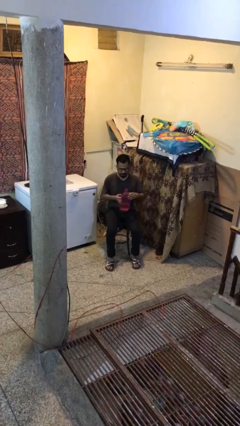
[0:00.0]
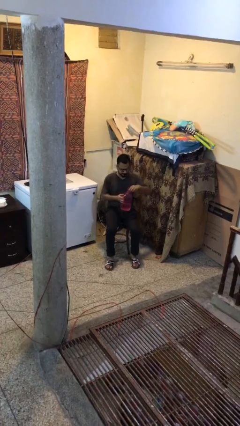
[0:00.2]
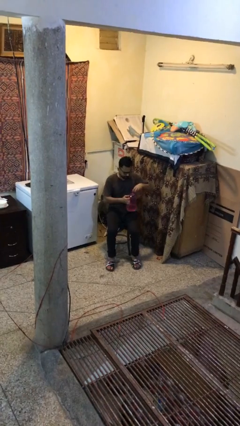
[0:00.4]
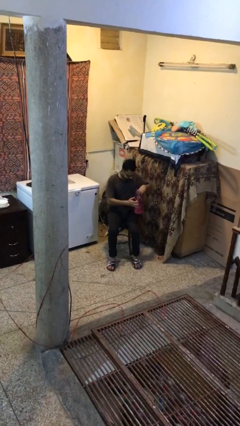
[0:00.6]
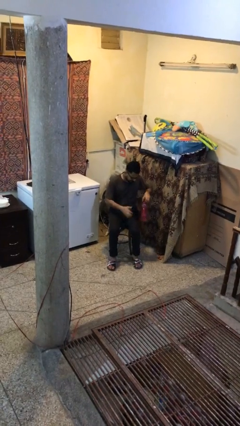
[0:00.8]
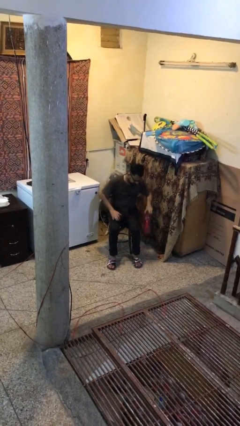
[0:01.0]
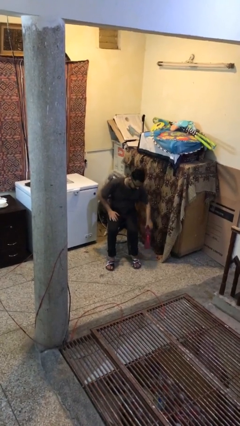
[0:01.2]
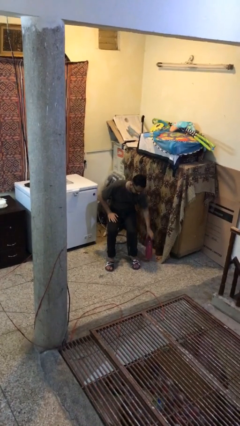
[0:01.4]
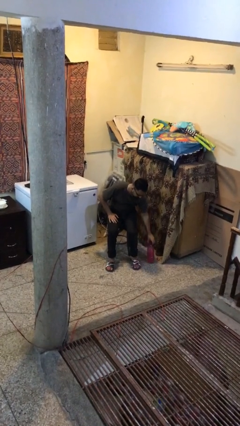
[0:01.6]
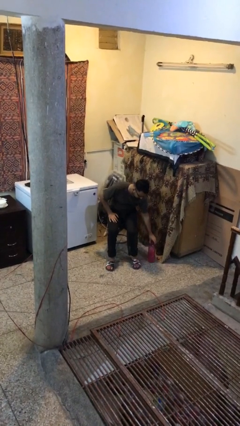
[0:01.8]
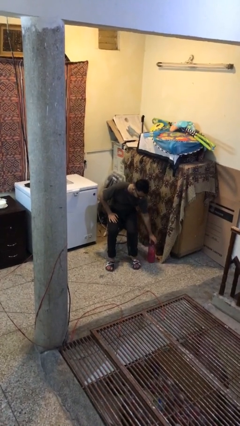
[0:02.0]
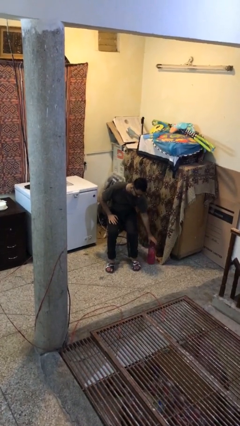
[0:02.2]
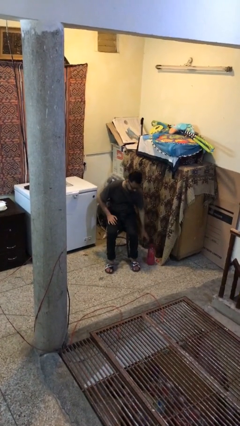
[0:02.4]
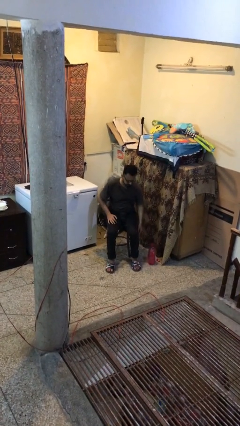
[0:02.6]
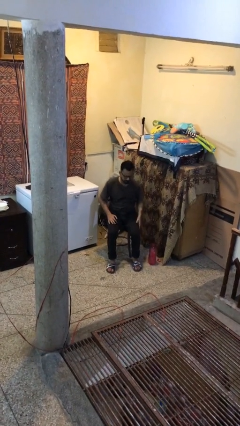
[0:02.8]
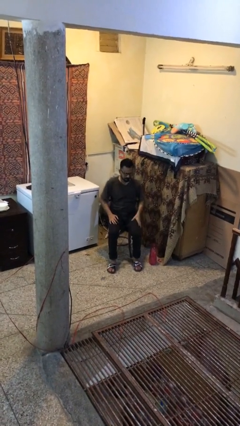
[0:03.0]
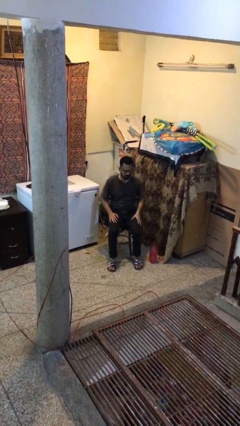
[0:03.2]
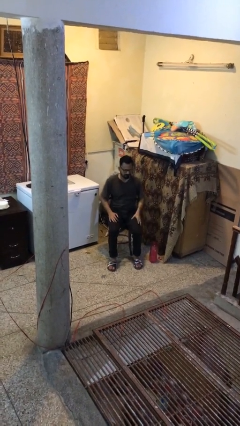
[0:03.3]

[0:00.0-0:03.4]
person puts down object on floor

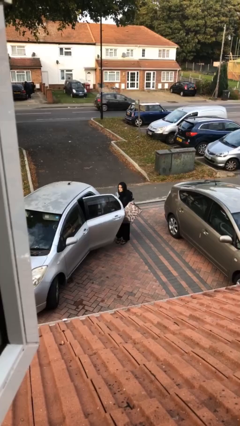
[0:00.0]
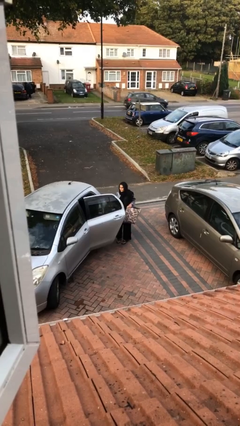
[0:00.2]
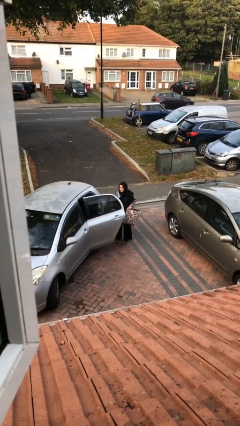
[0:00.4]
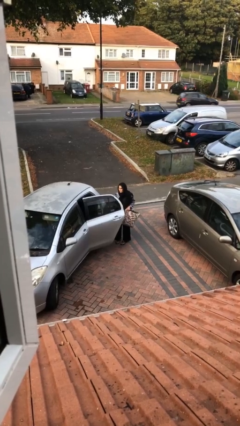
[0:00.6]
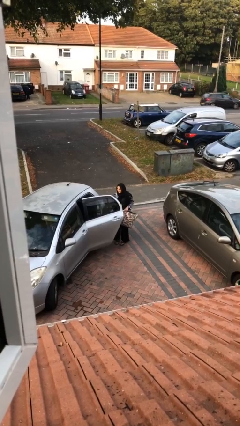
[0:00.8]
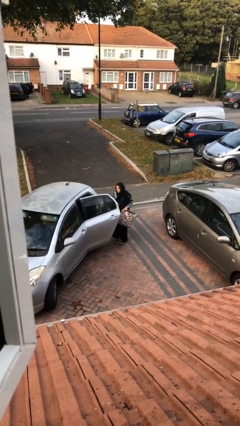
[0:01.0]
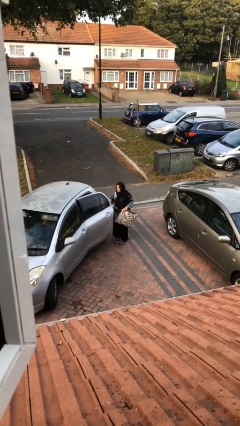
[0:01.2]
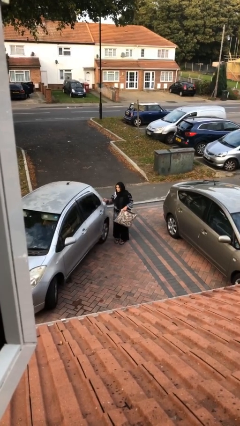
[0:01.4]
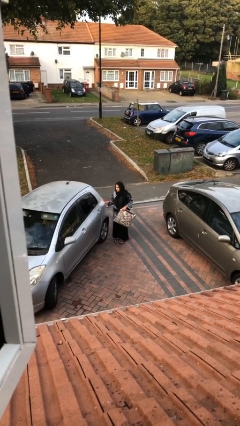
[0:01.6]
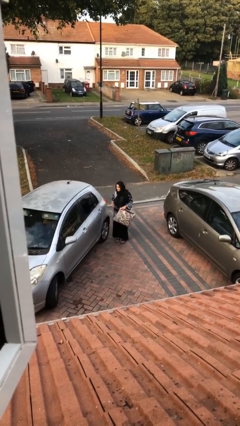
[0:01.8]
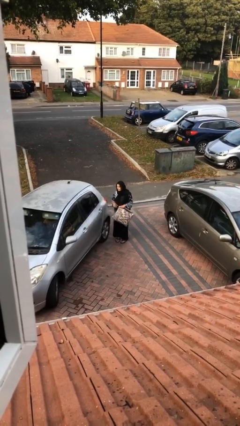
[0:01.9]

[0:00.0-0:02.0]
person closes car door

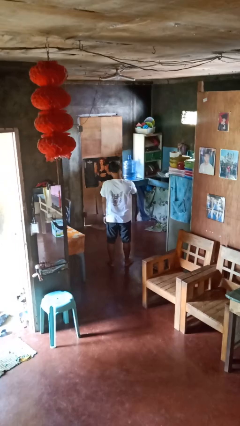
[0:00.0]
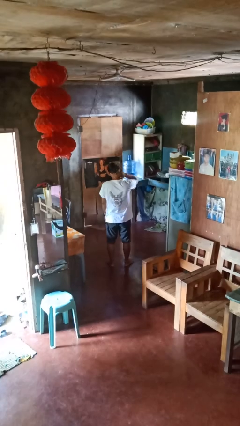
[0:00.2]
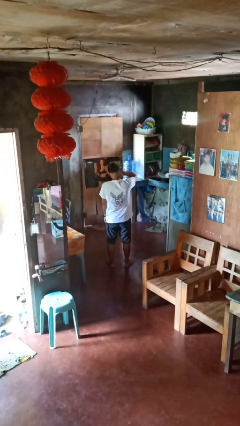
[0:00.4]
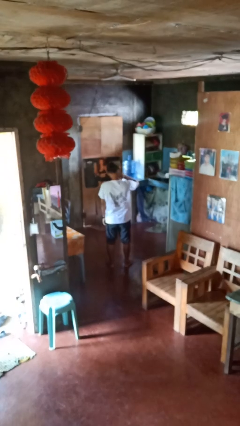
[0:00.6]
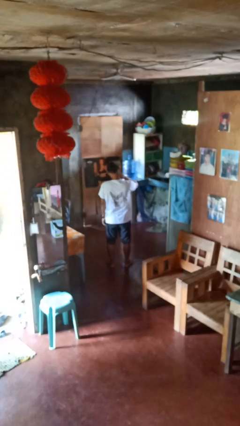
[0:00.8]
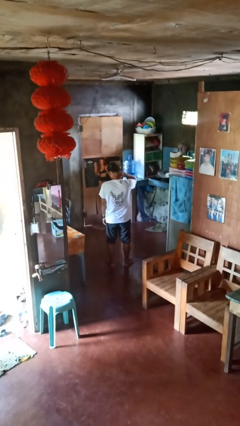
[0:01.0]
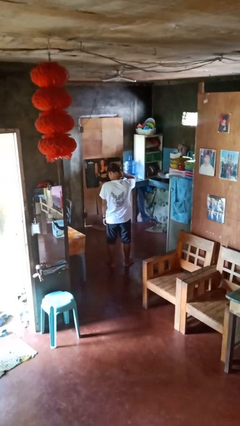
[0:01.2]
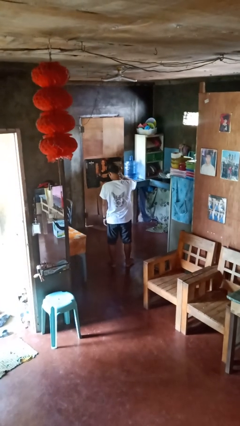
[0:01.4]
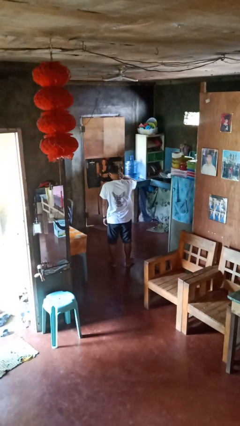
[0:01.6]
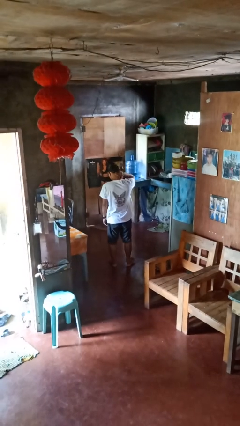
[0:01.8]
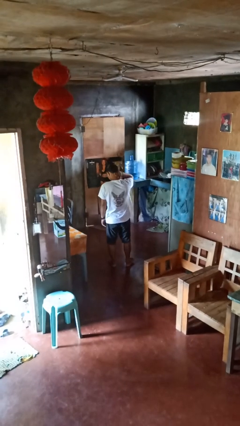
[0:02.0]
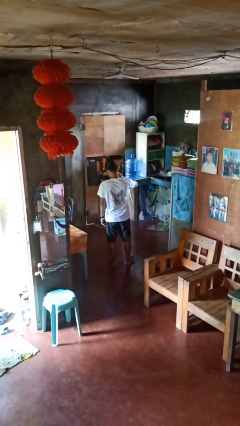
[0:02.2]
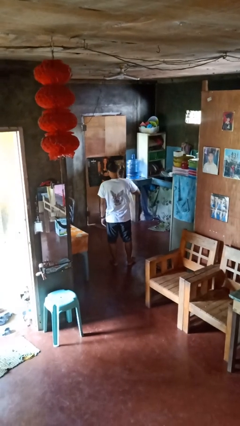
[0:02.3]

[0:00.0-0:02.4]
person rubs neck

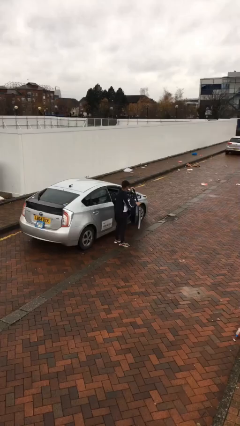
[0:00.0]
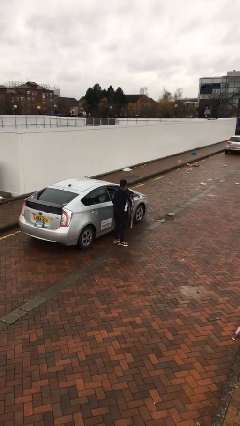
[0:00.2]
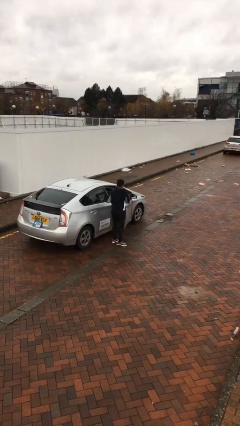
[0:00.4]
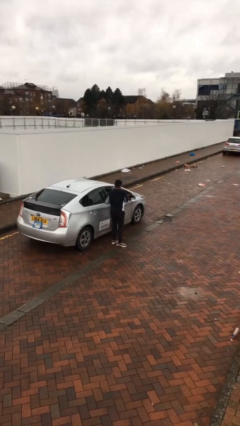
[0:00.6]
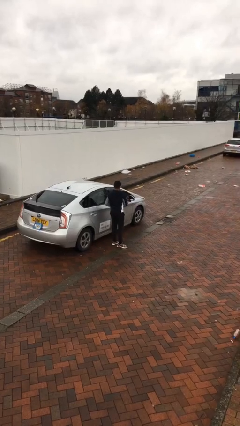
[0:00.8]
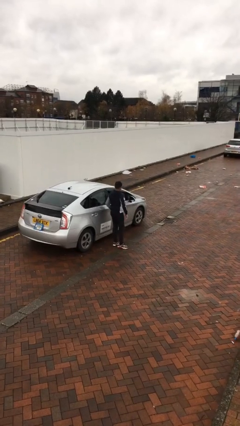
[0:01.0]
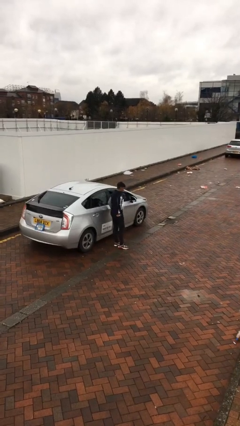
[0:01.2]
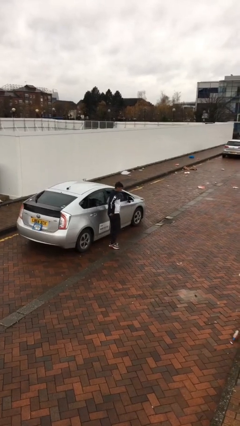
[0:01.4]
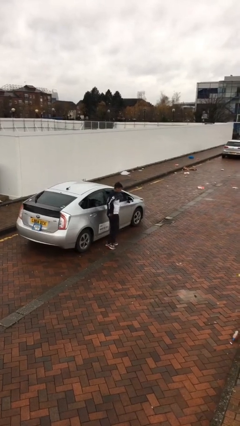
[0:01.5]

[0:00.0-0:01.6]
person exits car

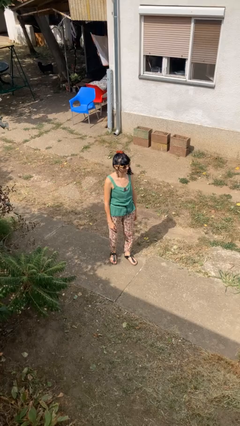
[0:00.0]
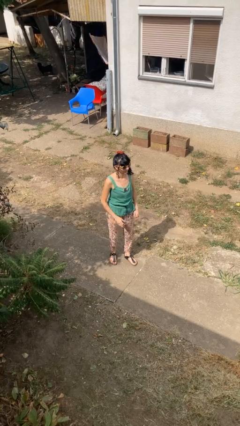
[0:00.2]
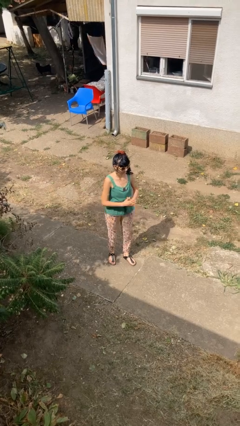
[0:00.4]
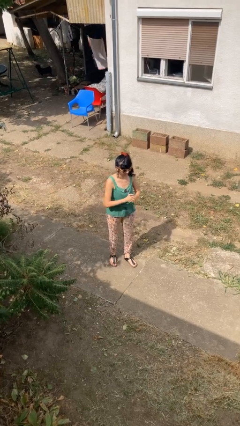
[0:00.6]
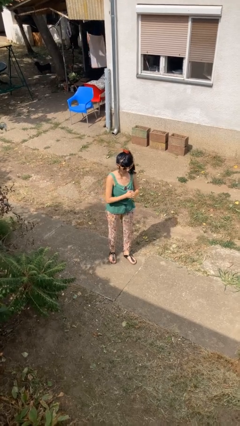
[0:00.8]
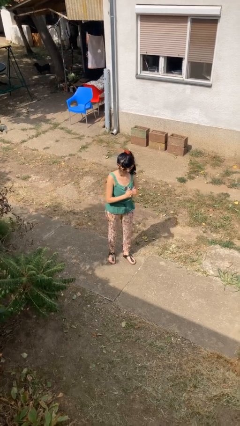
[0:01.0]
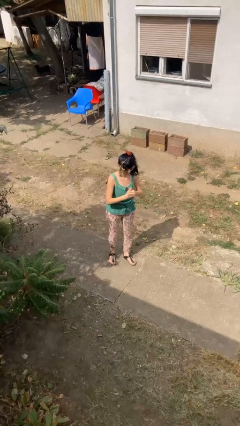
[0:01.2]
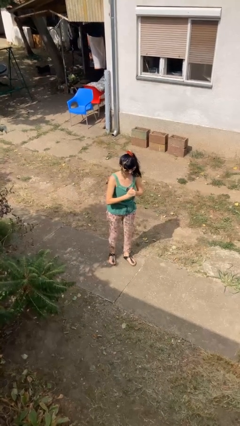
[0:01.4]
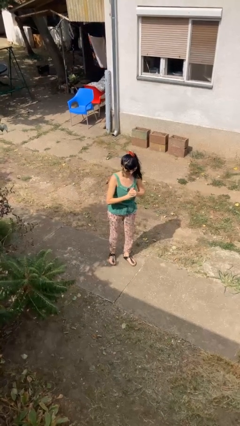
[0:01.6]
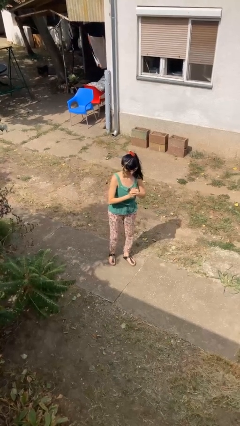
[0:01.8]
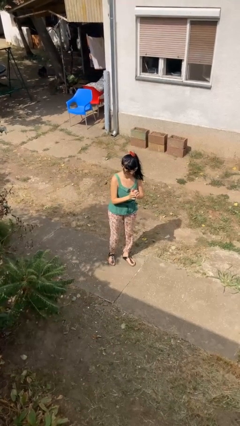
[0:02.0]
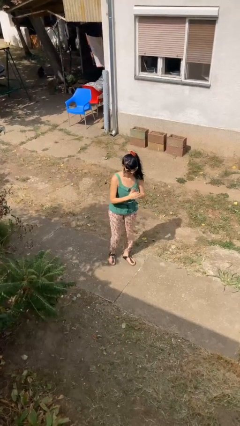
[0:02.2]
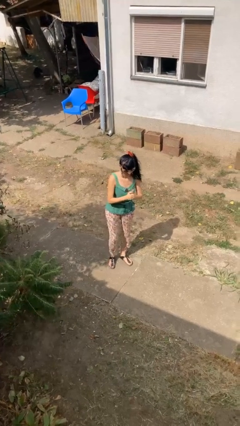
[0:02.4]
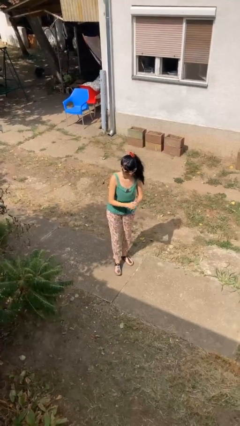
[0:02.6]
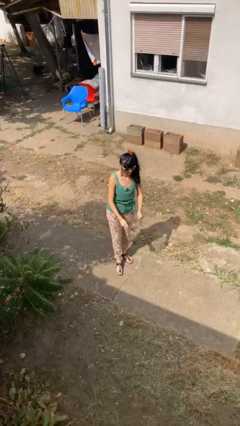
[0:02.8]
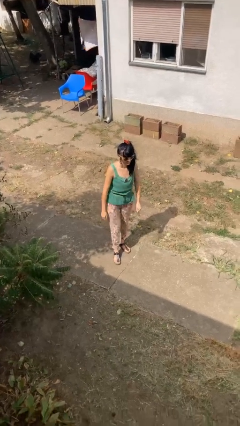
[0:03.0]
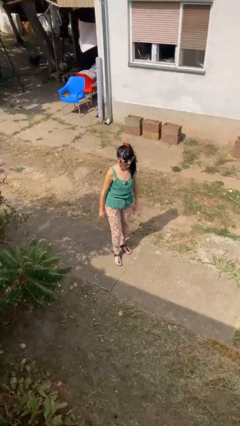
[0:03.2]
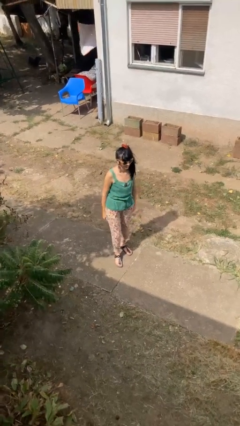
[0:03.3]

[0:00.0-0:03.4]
person cracks knuckles

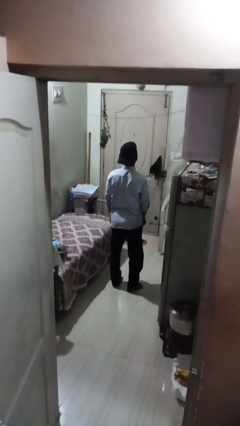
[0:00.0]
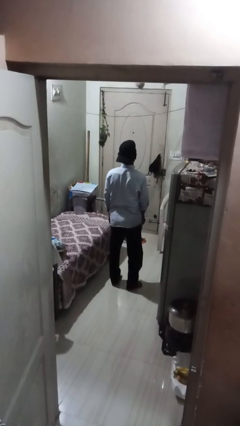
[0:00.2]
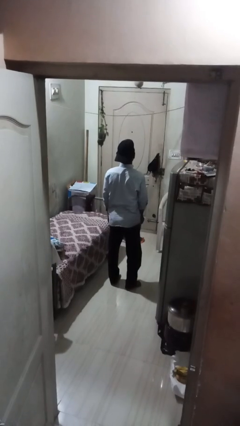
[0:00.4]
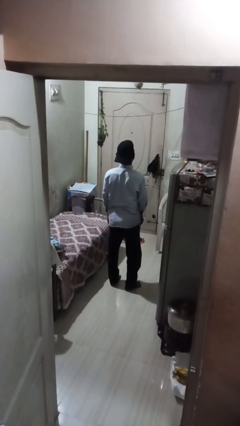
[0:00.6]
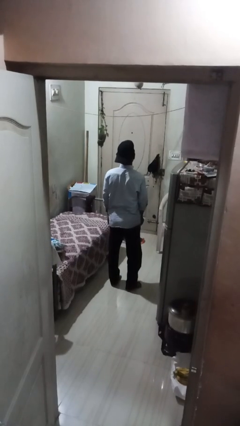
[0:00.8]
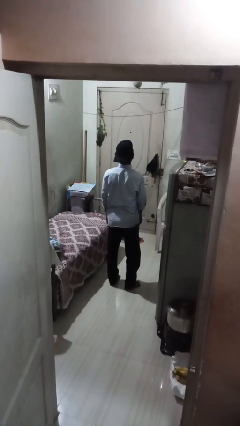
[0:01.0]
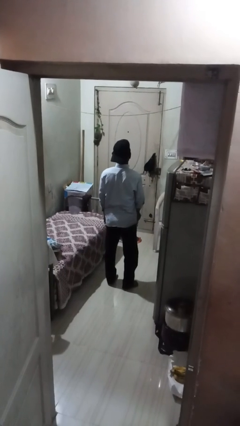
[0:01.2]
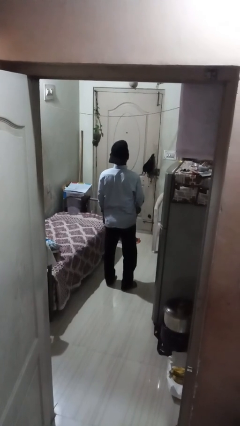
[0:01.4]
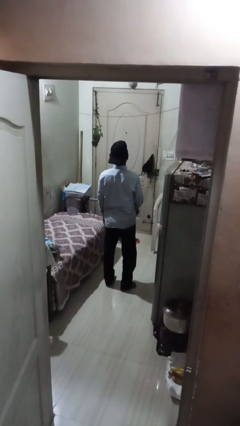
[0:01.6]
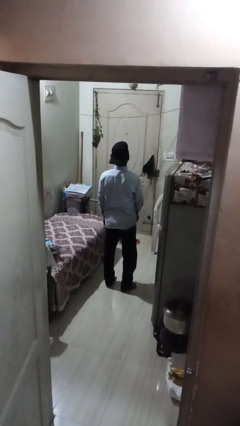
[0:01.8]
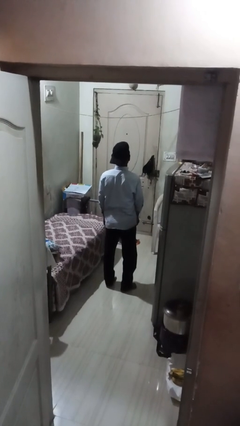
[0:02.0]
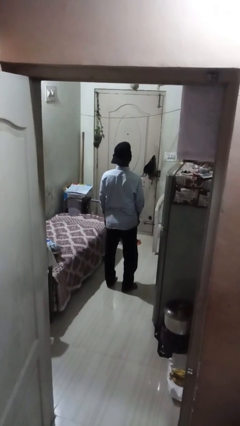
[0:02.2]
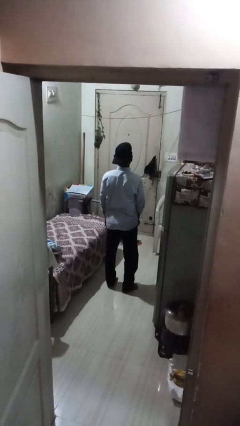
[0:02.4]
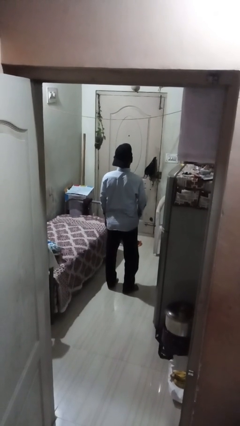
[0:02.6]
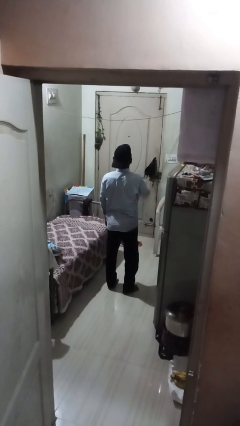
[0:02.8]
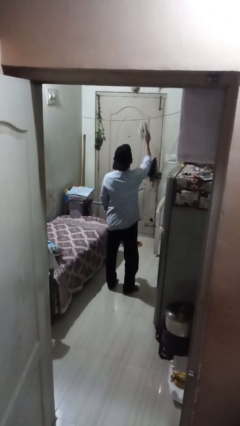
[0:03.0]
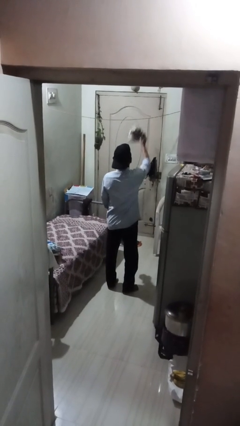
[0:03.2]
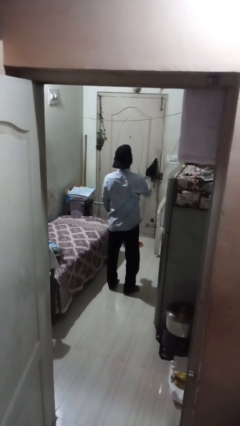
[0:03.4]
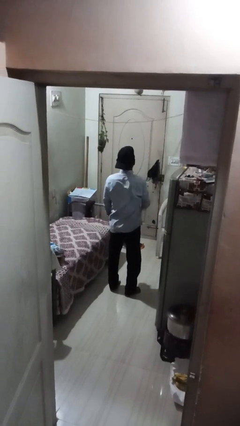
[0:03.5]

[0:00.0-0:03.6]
person drops object

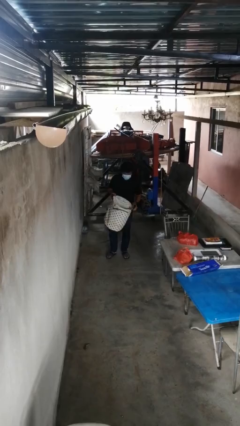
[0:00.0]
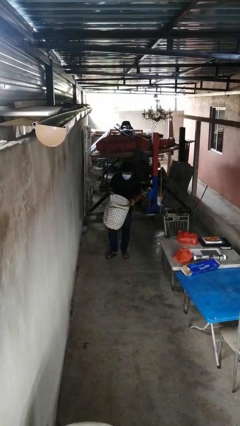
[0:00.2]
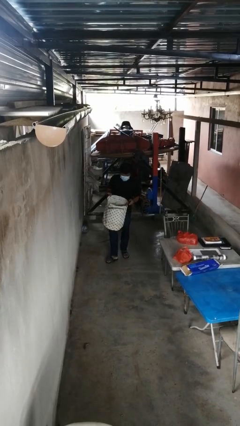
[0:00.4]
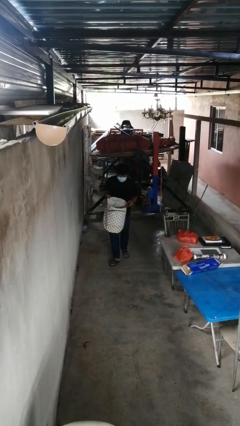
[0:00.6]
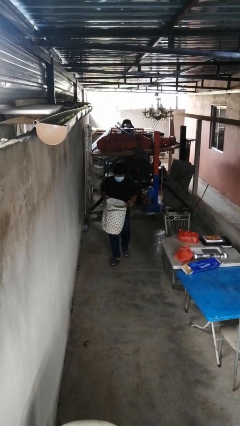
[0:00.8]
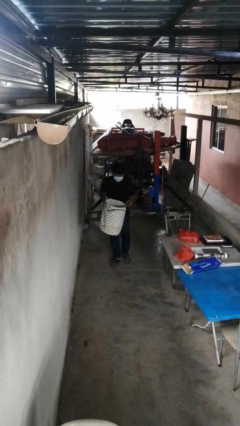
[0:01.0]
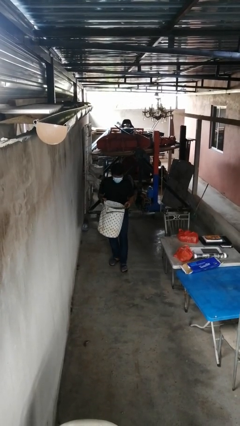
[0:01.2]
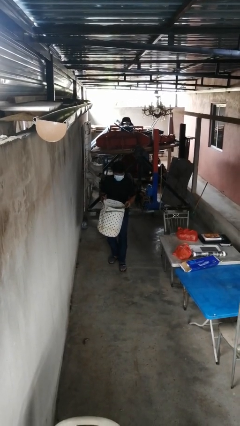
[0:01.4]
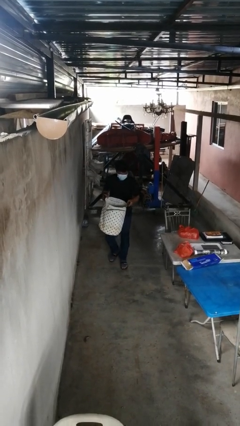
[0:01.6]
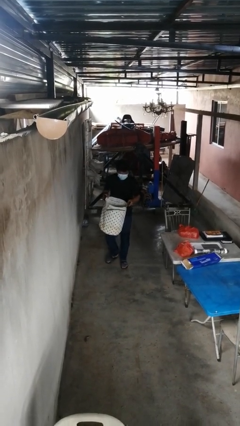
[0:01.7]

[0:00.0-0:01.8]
person carries laundry basket
